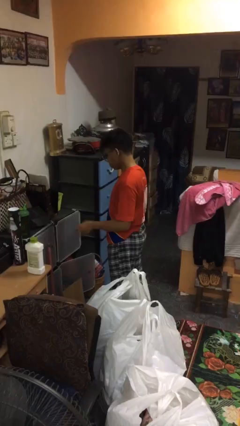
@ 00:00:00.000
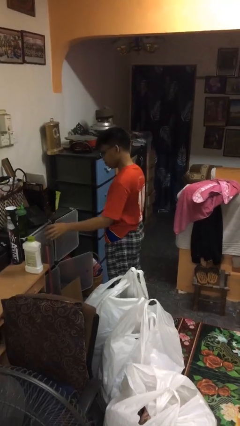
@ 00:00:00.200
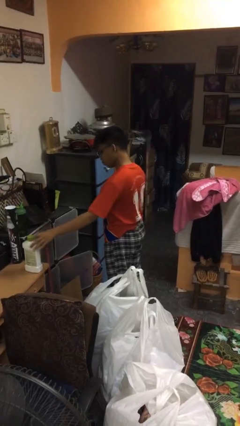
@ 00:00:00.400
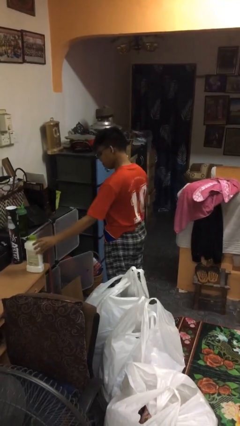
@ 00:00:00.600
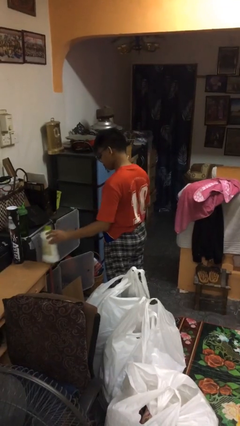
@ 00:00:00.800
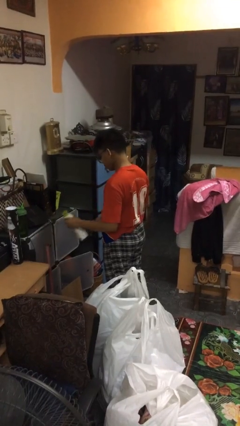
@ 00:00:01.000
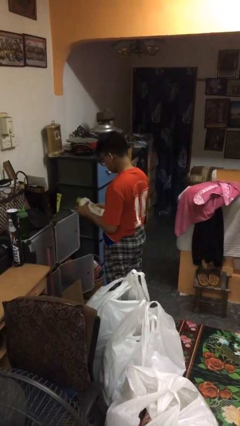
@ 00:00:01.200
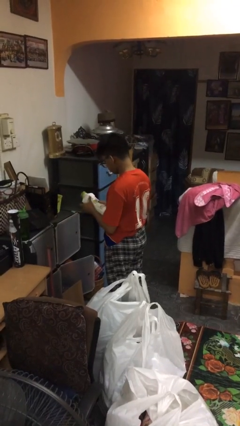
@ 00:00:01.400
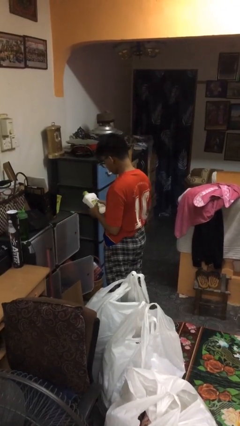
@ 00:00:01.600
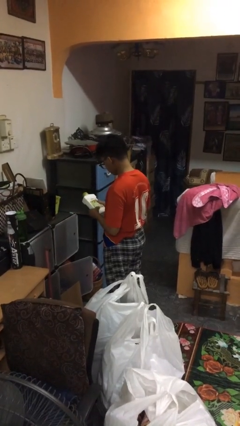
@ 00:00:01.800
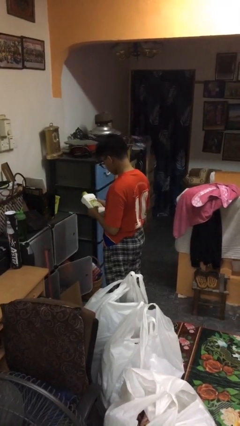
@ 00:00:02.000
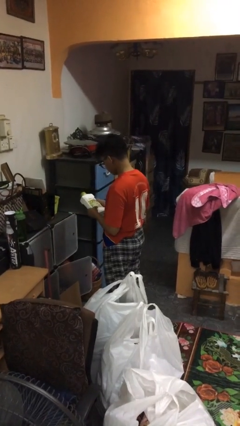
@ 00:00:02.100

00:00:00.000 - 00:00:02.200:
person picks up object from countertop

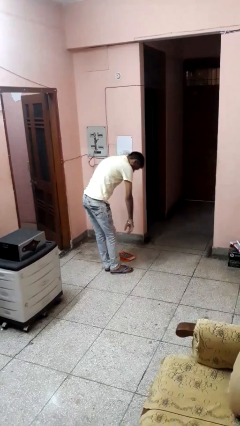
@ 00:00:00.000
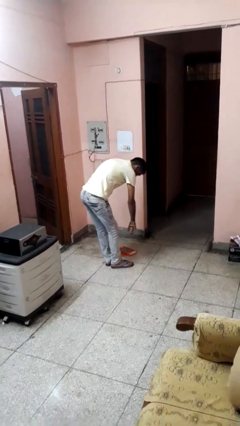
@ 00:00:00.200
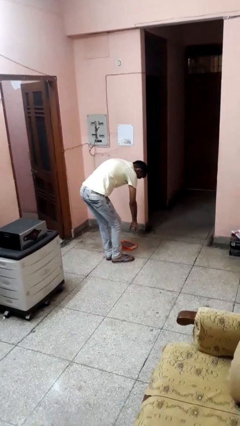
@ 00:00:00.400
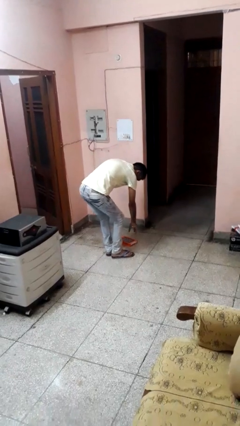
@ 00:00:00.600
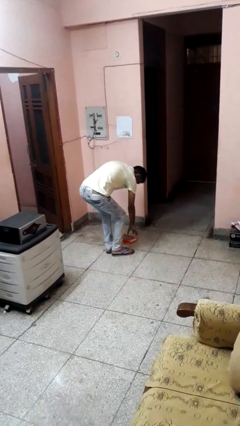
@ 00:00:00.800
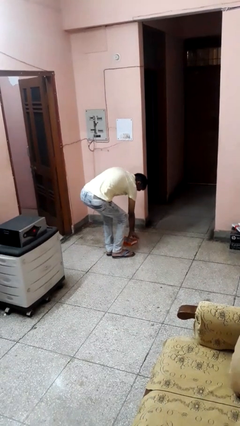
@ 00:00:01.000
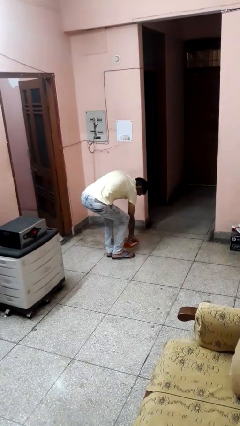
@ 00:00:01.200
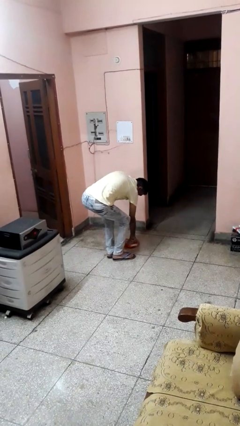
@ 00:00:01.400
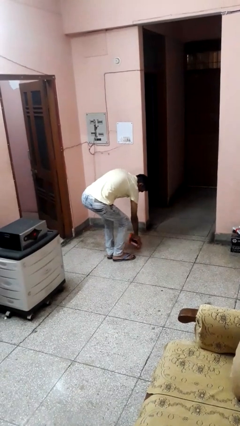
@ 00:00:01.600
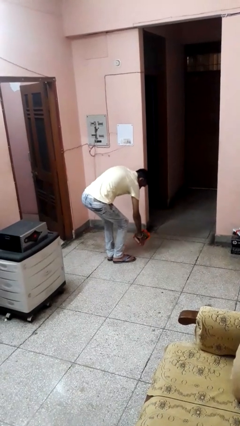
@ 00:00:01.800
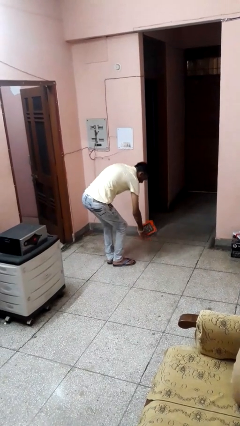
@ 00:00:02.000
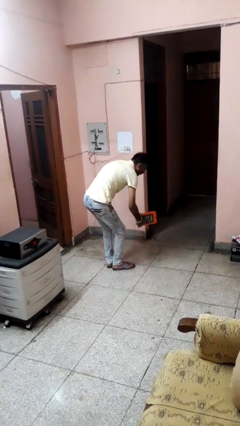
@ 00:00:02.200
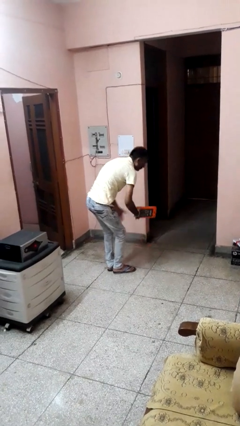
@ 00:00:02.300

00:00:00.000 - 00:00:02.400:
person picks up object from floor

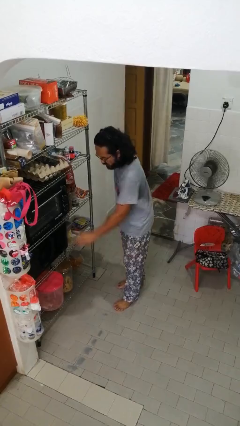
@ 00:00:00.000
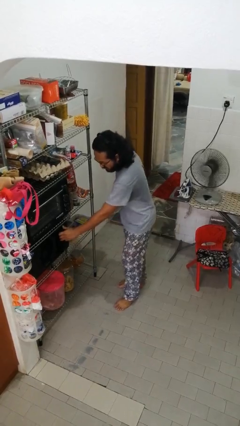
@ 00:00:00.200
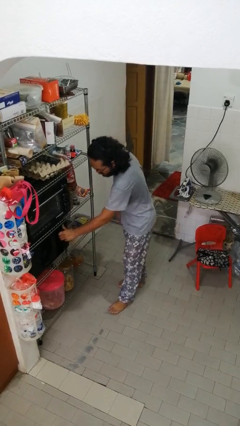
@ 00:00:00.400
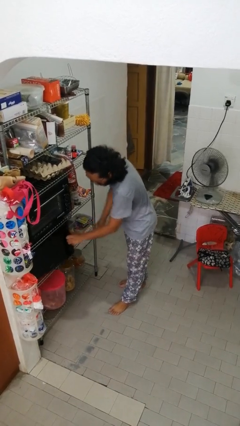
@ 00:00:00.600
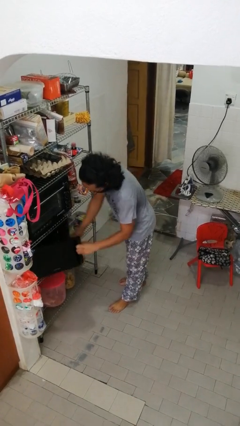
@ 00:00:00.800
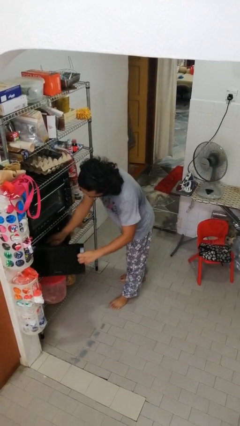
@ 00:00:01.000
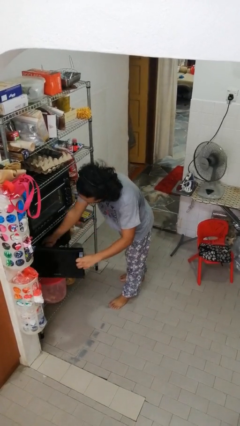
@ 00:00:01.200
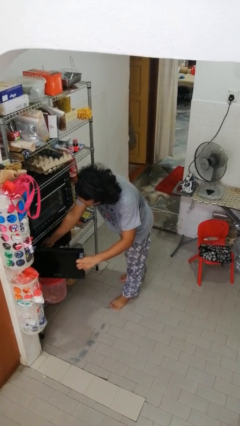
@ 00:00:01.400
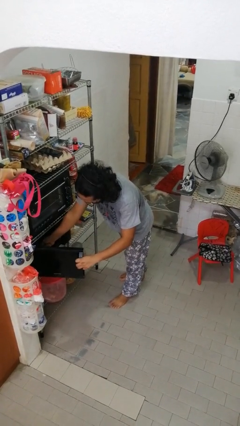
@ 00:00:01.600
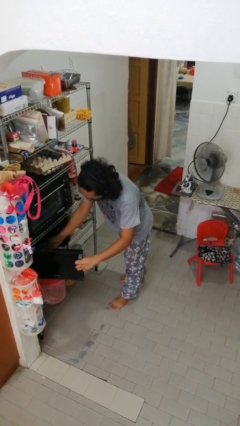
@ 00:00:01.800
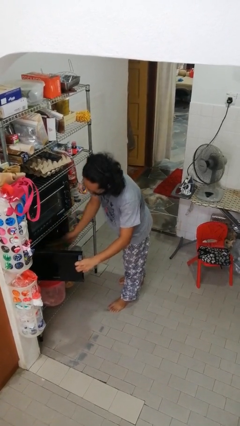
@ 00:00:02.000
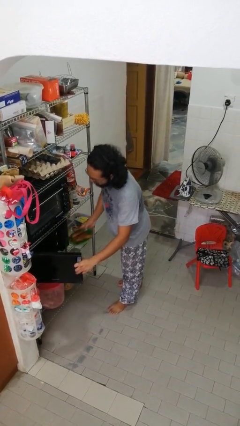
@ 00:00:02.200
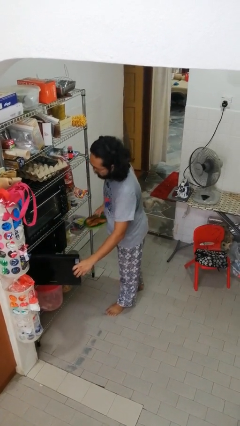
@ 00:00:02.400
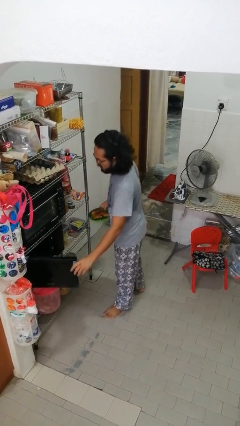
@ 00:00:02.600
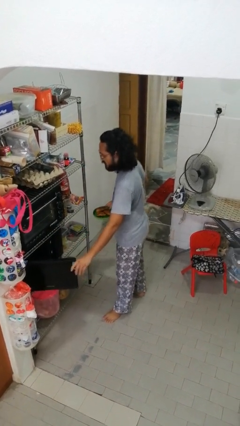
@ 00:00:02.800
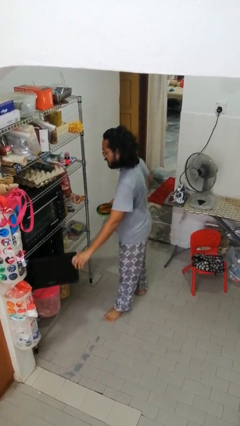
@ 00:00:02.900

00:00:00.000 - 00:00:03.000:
person takes object from microwave

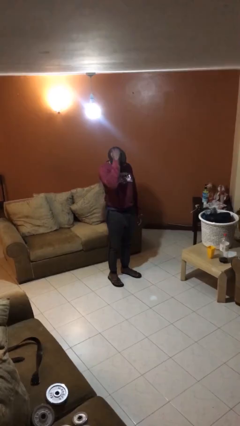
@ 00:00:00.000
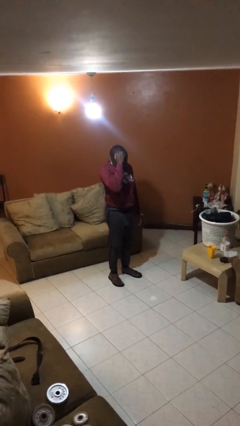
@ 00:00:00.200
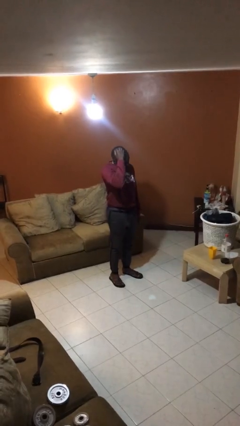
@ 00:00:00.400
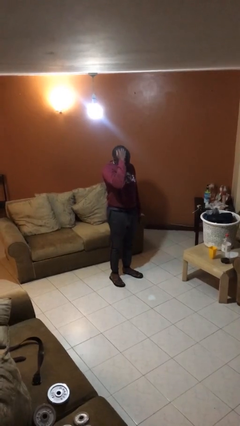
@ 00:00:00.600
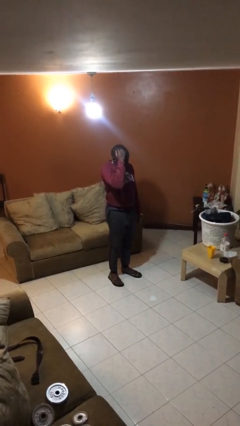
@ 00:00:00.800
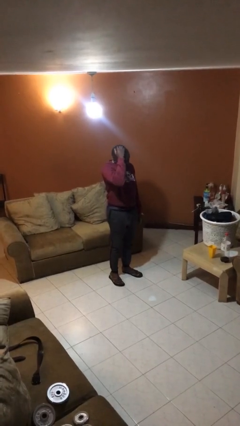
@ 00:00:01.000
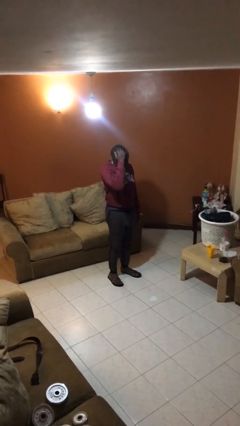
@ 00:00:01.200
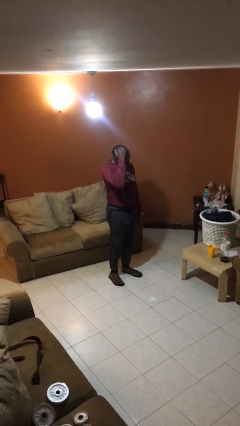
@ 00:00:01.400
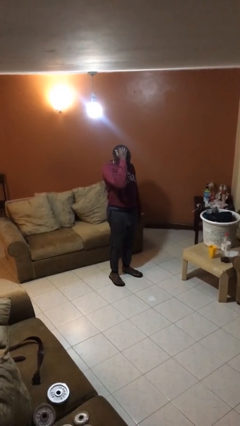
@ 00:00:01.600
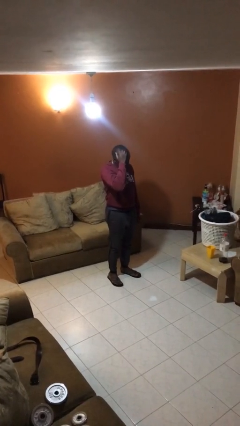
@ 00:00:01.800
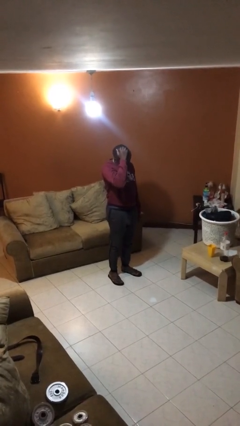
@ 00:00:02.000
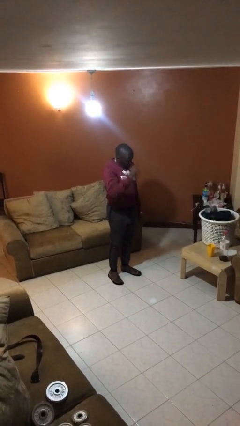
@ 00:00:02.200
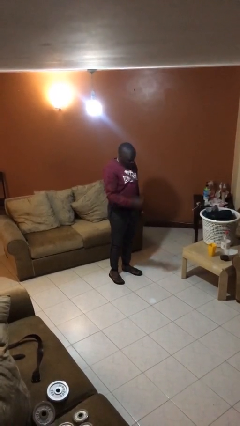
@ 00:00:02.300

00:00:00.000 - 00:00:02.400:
person scratches face

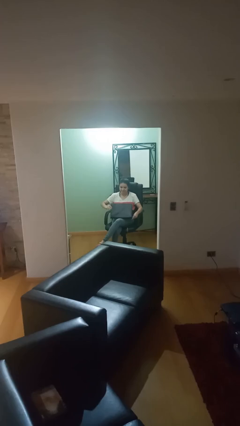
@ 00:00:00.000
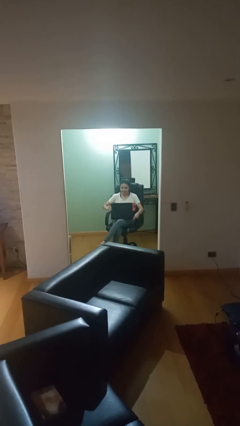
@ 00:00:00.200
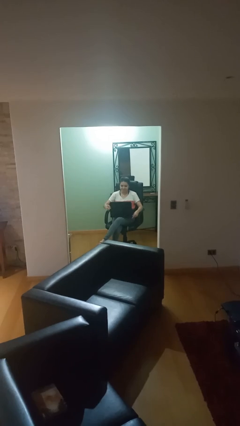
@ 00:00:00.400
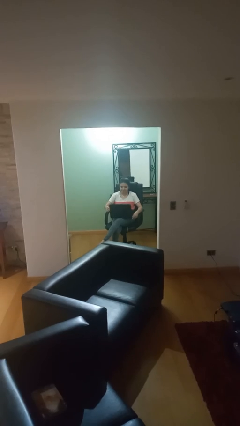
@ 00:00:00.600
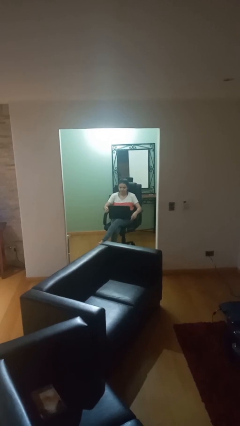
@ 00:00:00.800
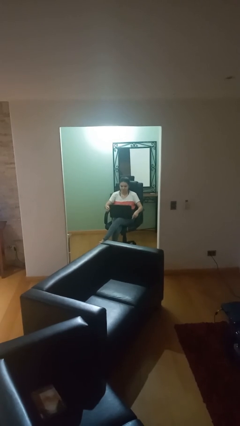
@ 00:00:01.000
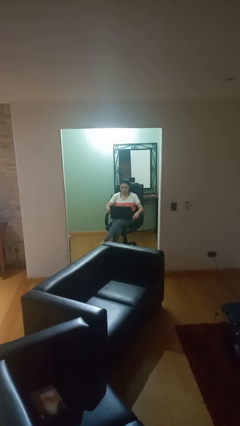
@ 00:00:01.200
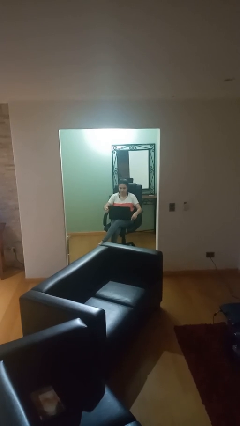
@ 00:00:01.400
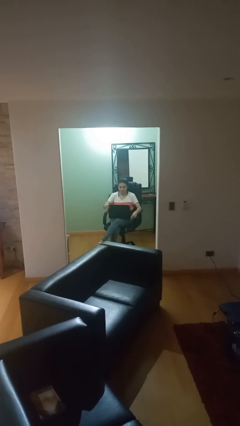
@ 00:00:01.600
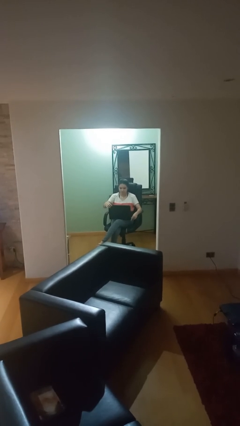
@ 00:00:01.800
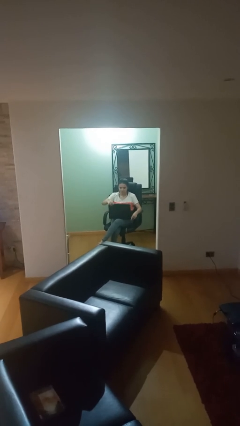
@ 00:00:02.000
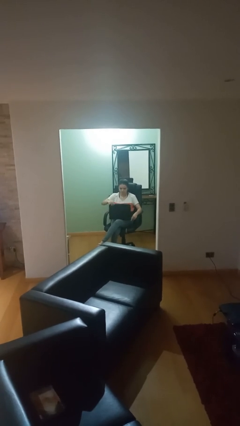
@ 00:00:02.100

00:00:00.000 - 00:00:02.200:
person interacts with laptop

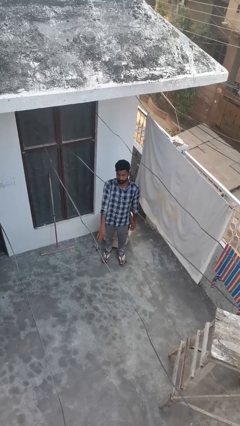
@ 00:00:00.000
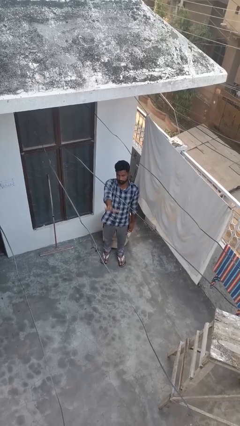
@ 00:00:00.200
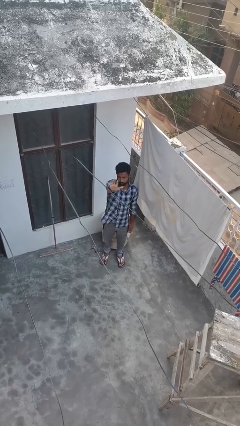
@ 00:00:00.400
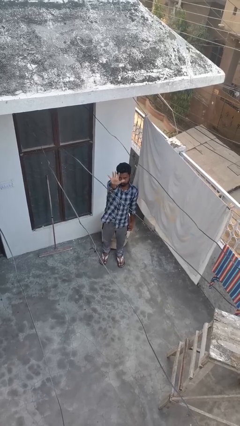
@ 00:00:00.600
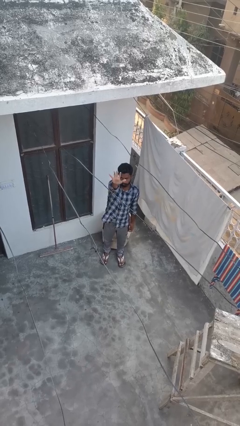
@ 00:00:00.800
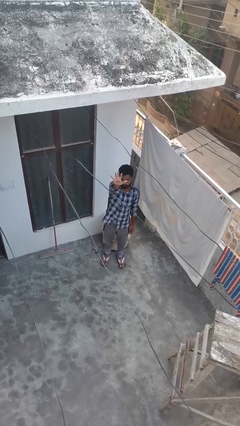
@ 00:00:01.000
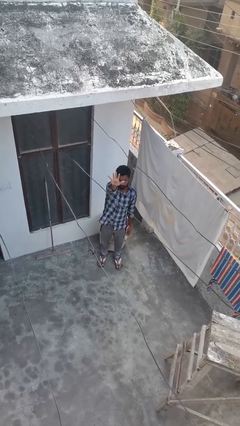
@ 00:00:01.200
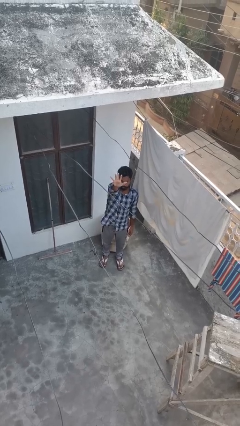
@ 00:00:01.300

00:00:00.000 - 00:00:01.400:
person gestures number five

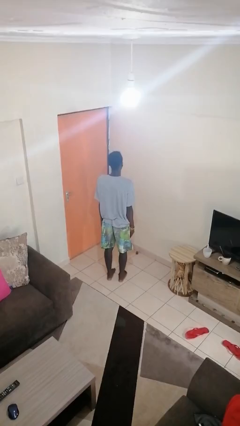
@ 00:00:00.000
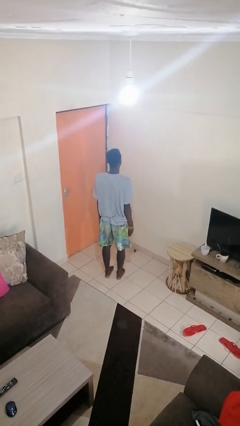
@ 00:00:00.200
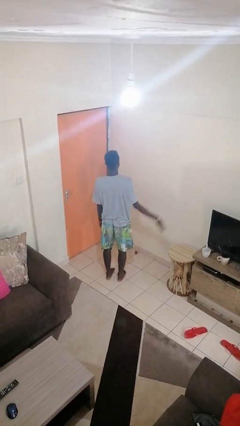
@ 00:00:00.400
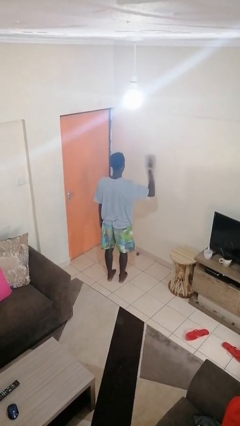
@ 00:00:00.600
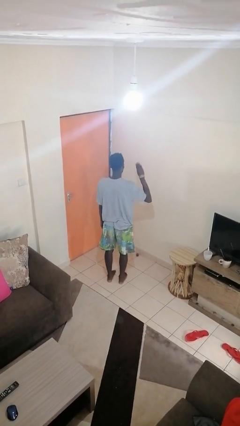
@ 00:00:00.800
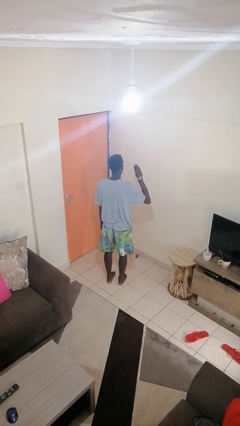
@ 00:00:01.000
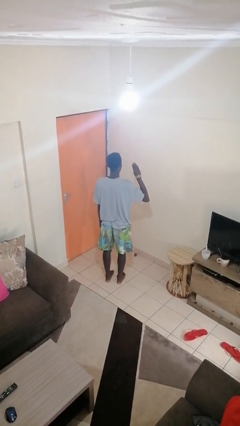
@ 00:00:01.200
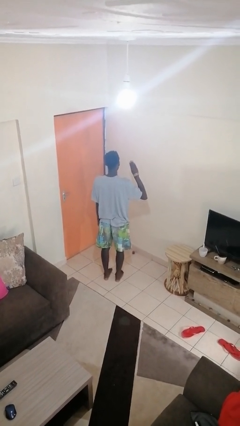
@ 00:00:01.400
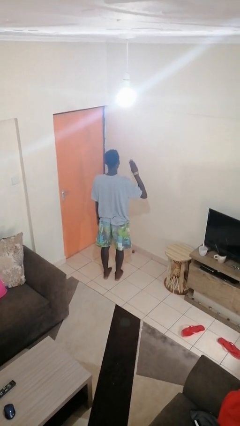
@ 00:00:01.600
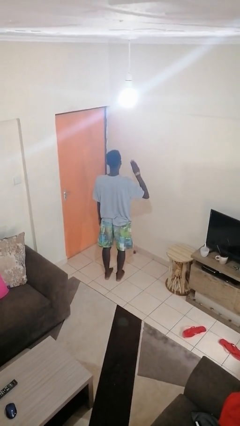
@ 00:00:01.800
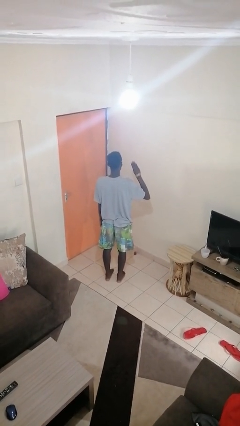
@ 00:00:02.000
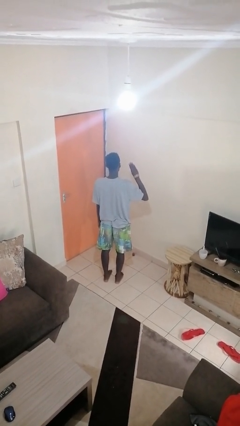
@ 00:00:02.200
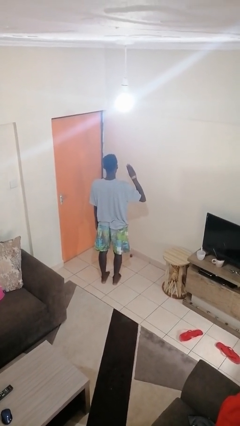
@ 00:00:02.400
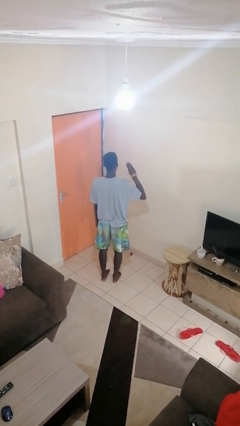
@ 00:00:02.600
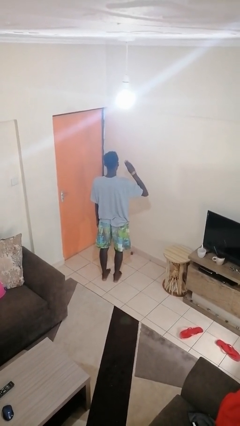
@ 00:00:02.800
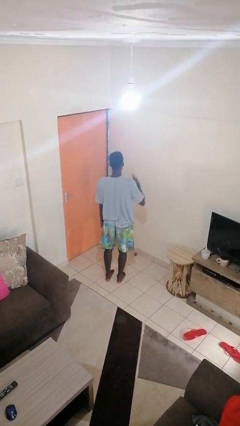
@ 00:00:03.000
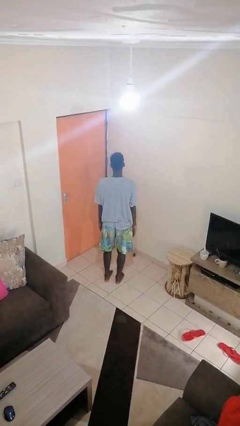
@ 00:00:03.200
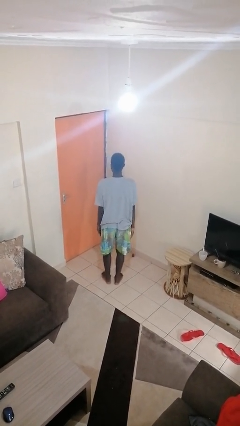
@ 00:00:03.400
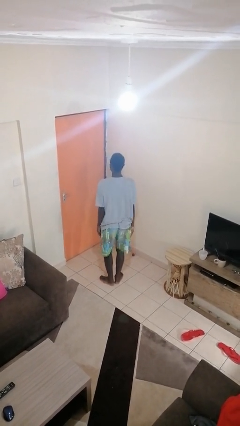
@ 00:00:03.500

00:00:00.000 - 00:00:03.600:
person salutes
